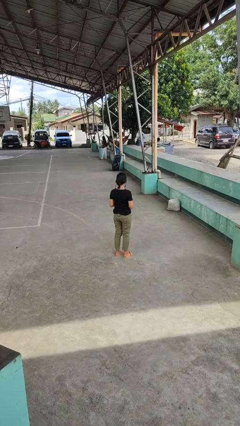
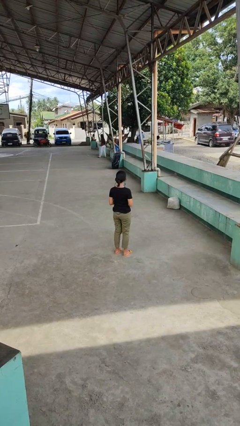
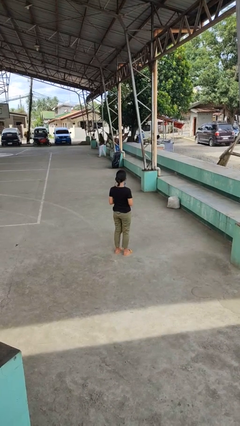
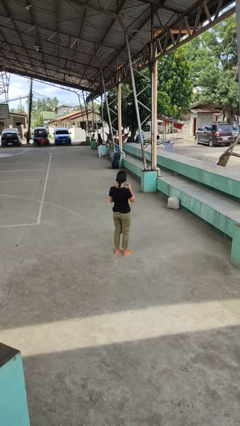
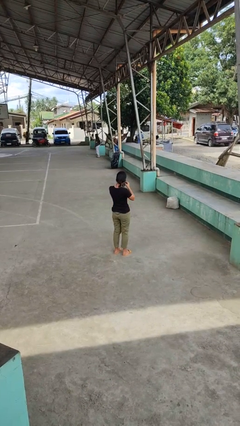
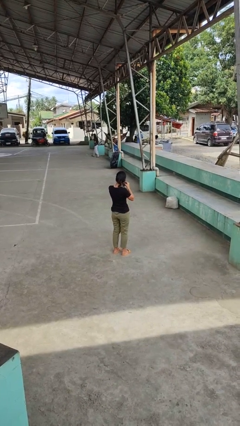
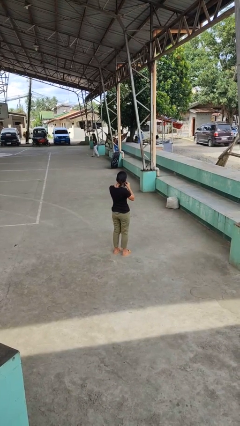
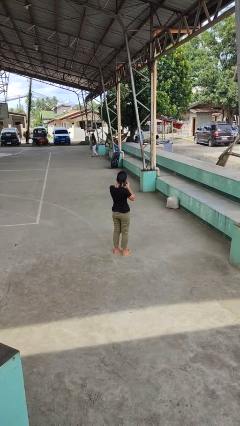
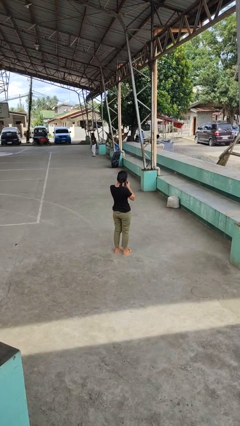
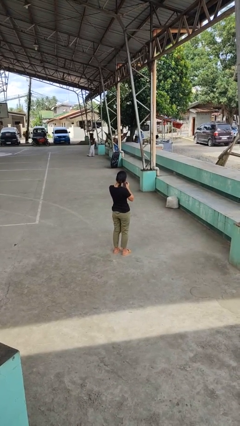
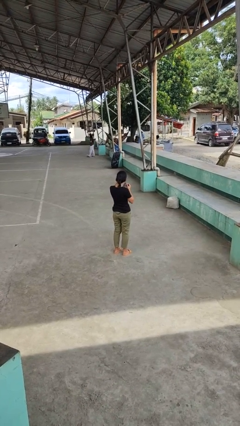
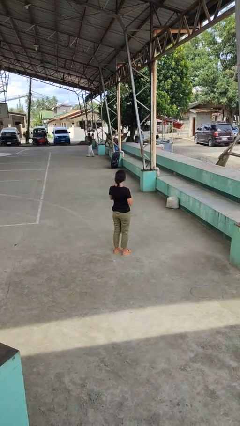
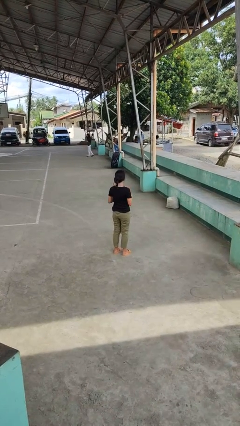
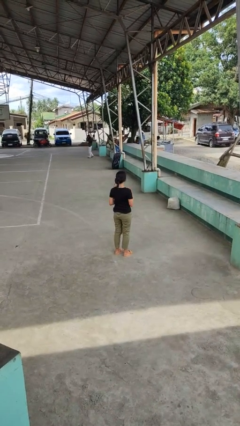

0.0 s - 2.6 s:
person takes off earrings

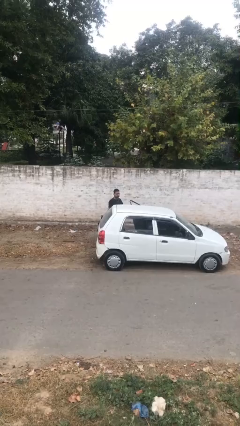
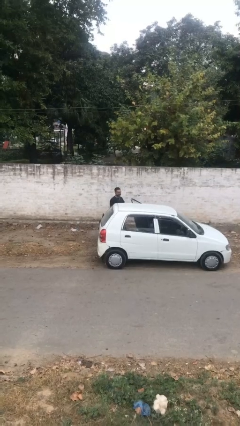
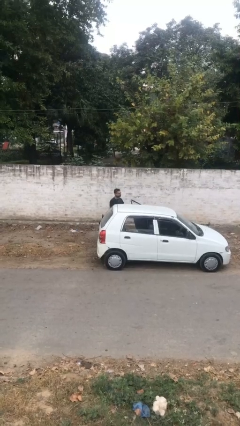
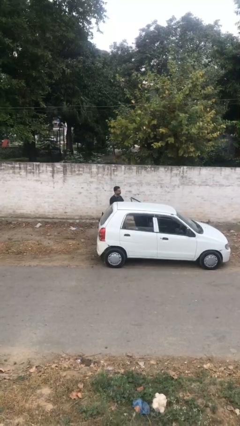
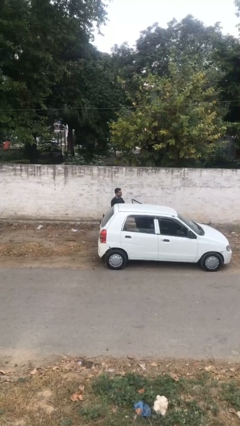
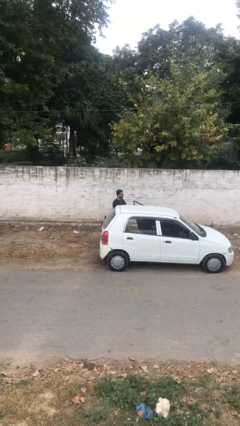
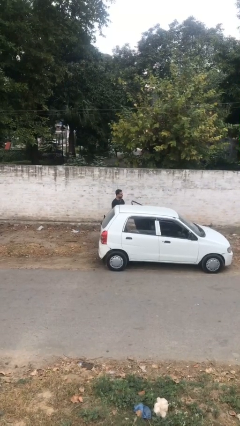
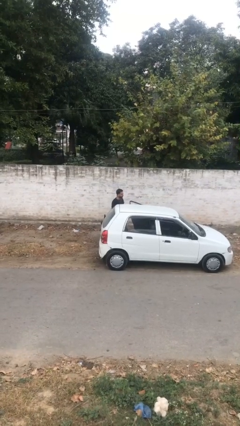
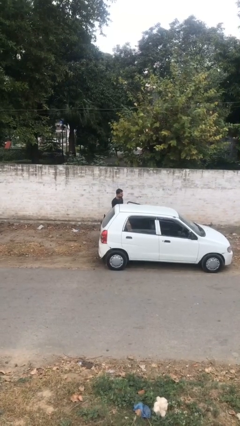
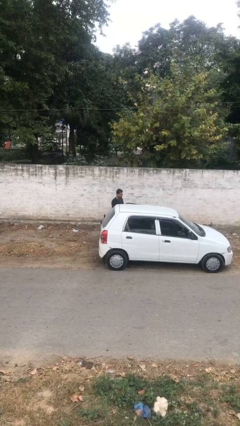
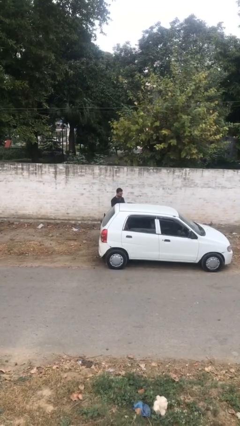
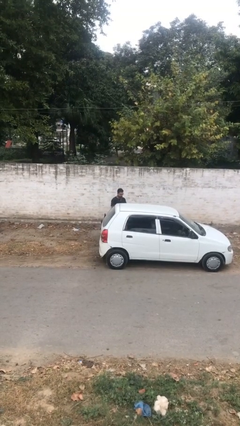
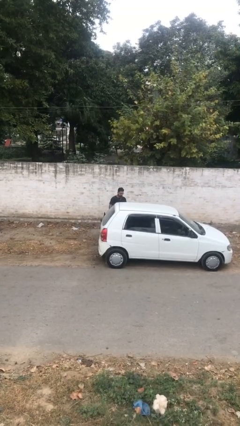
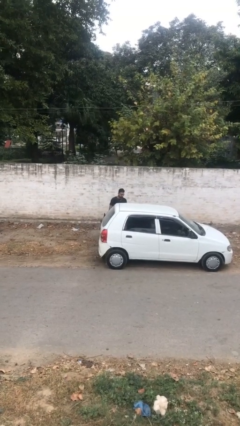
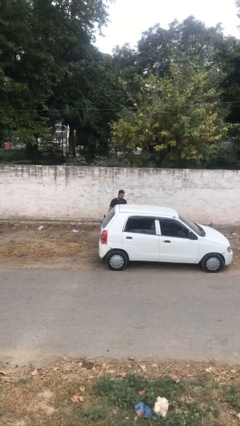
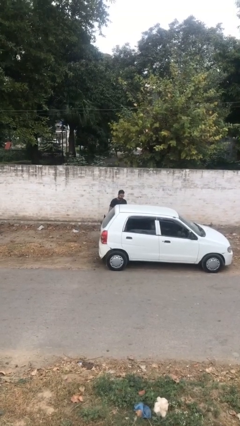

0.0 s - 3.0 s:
person closes car door

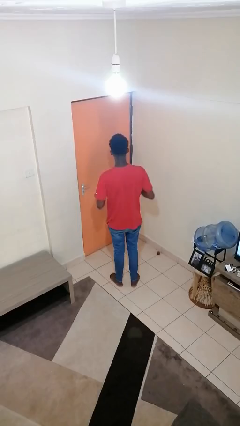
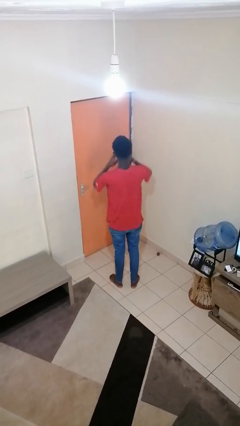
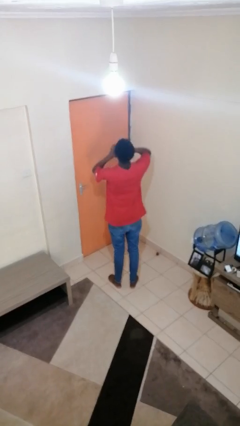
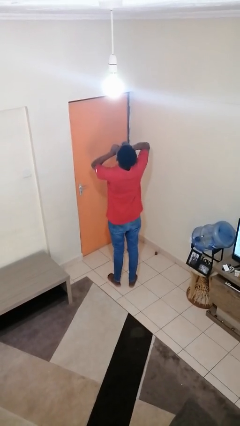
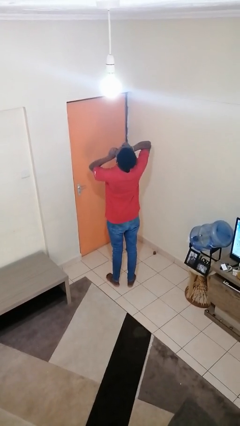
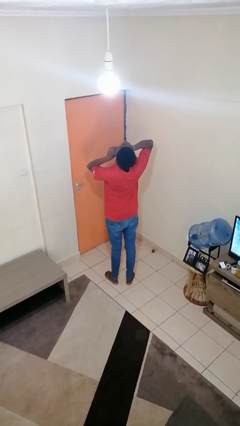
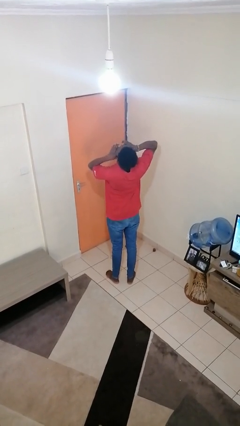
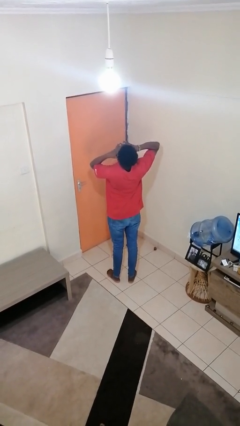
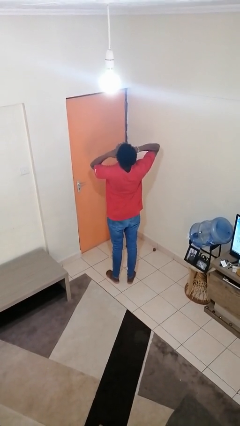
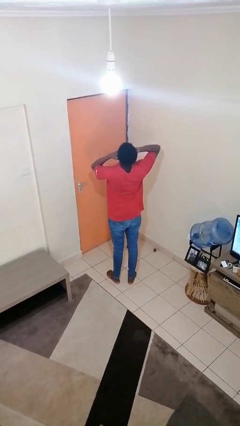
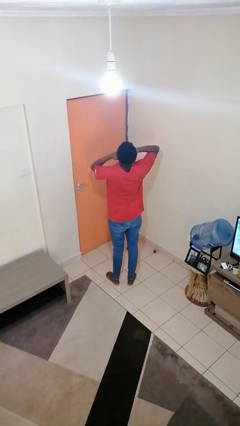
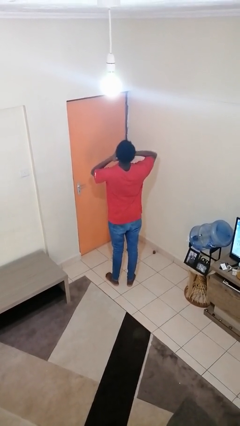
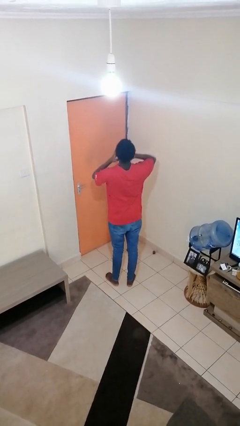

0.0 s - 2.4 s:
person yawns

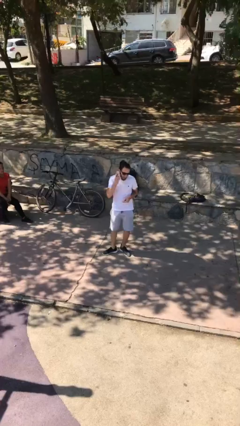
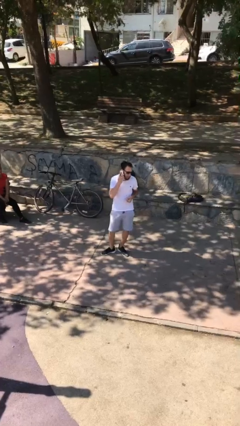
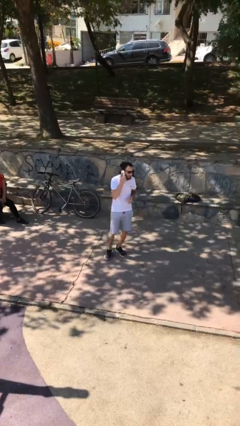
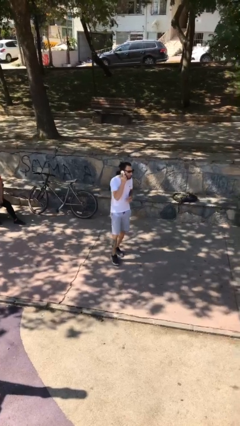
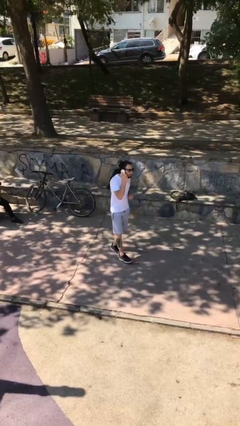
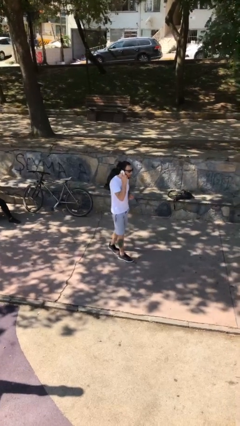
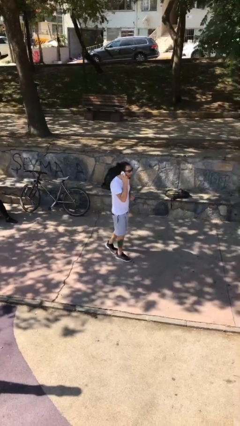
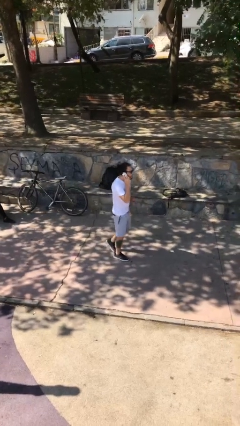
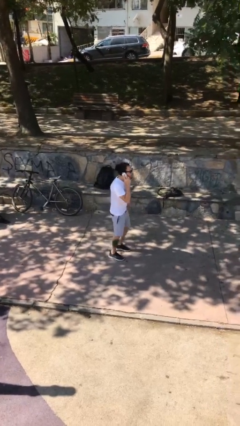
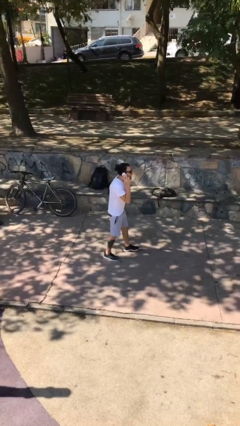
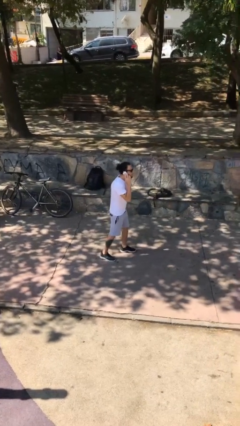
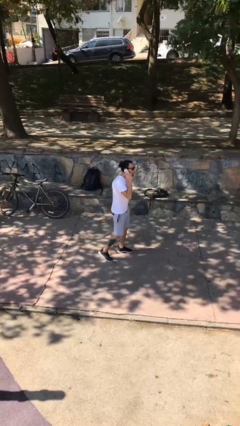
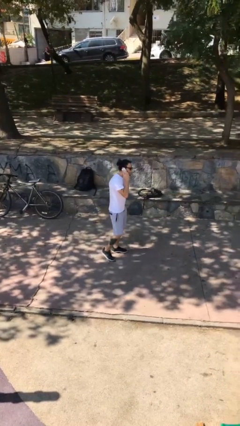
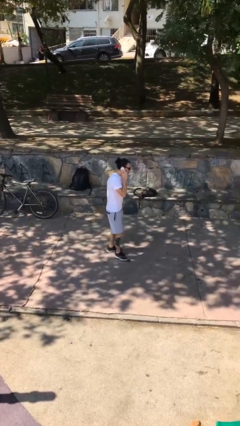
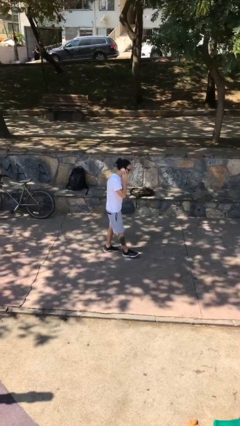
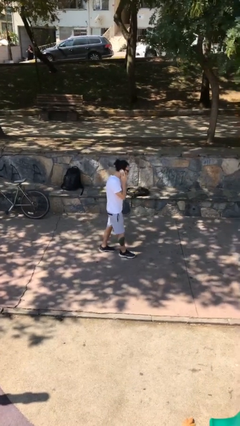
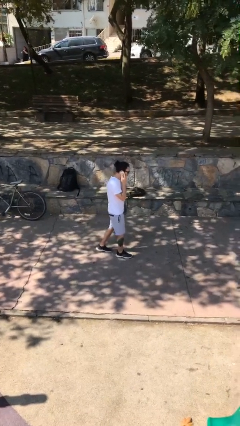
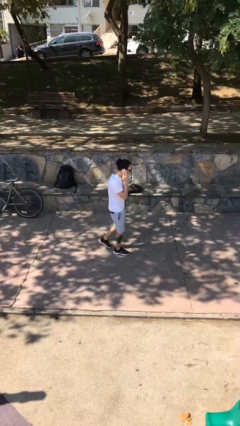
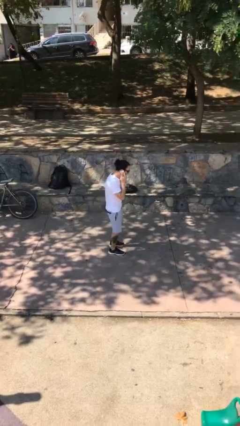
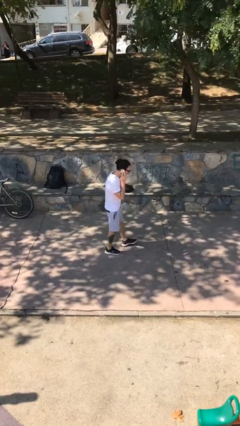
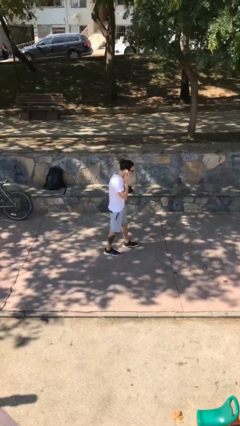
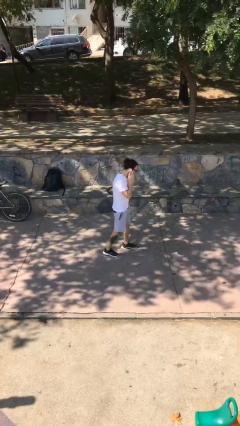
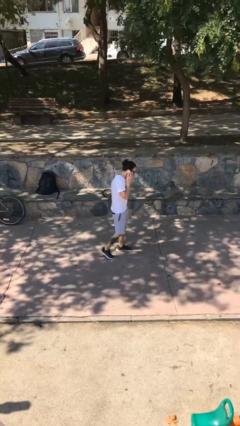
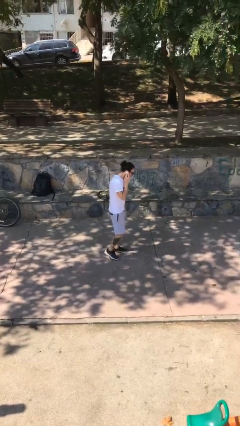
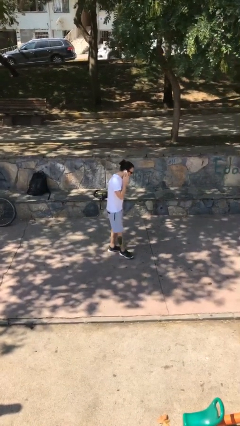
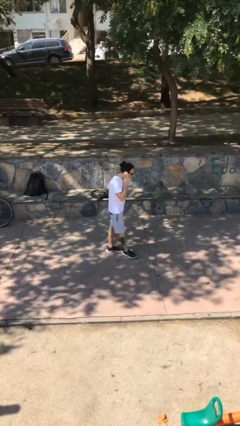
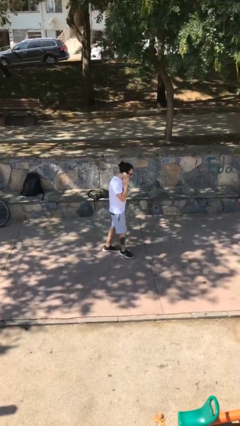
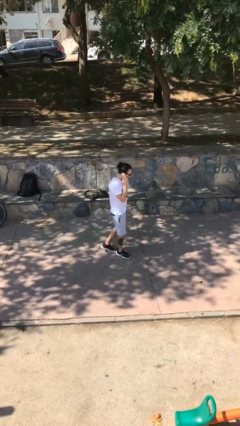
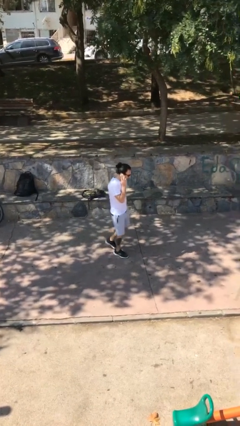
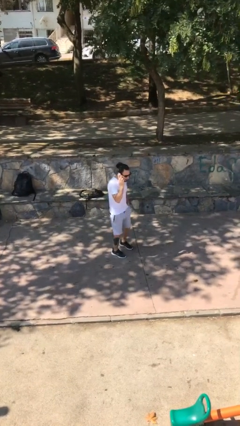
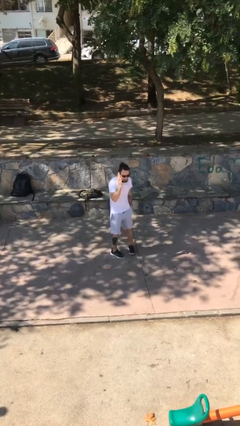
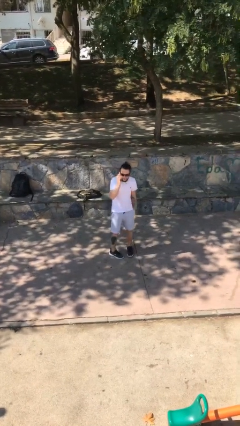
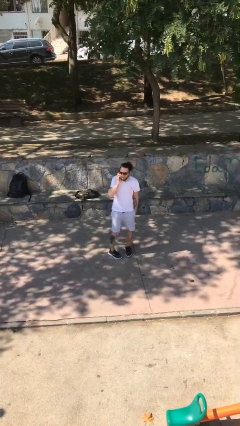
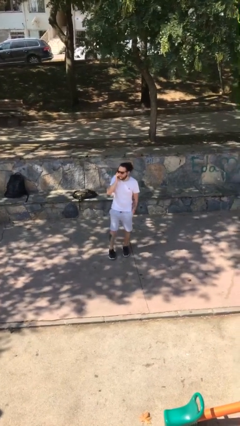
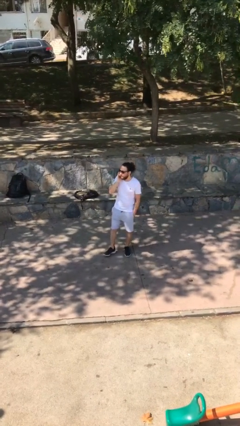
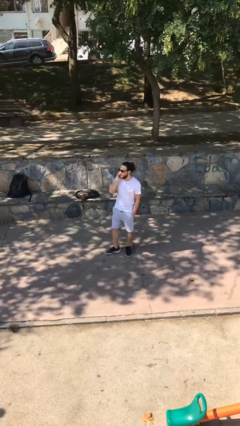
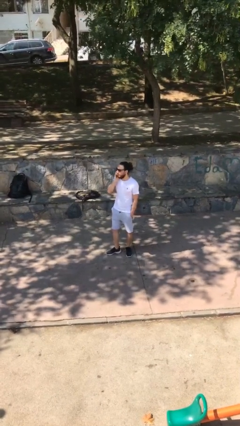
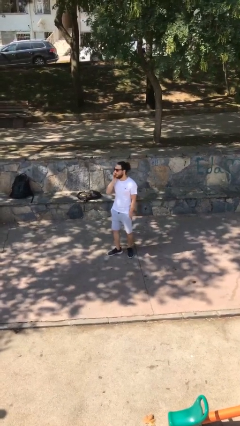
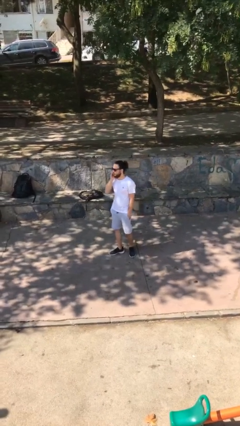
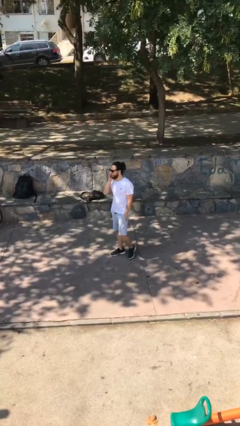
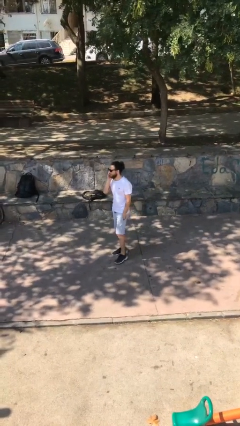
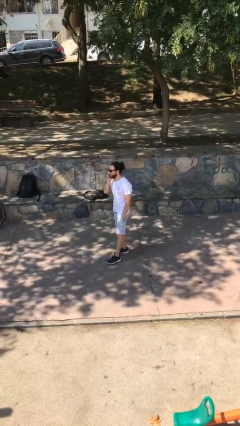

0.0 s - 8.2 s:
person talks on phone

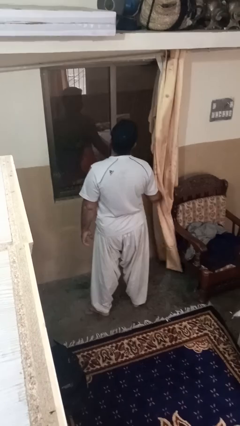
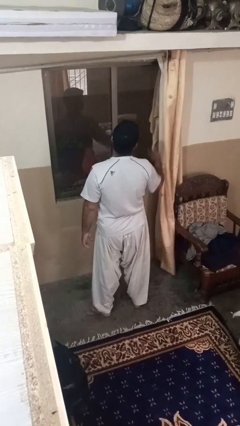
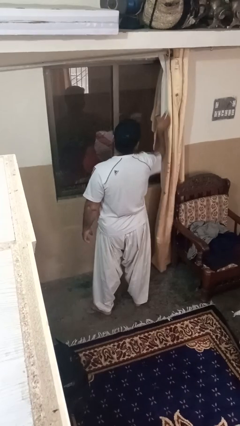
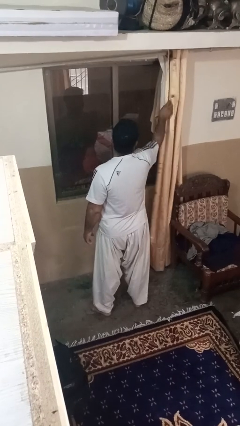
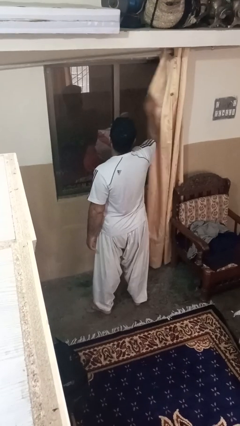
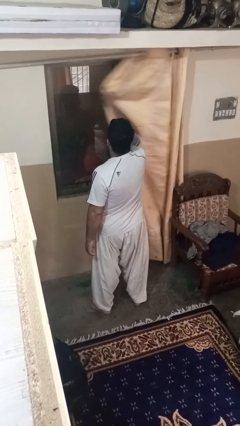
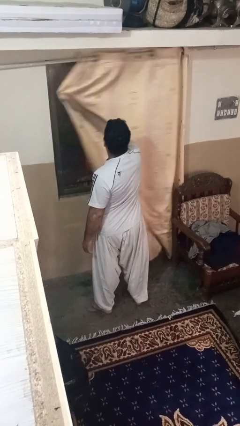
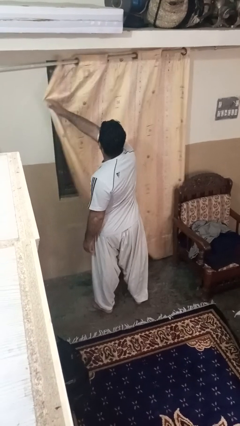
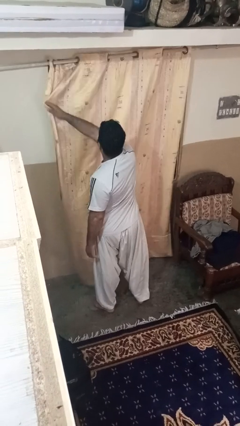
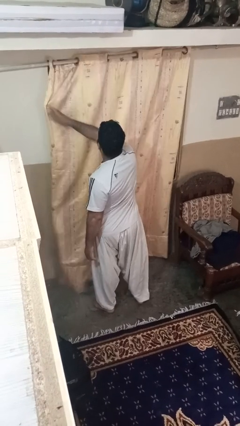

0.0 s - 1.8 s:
person closes curtains
